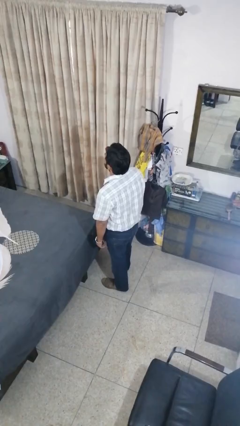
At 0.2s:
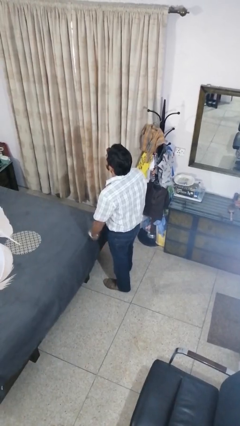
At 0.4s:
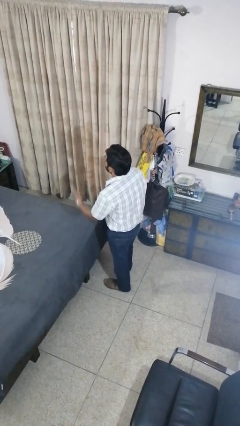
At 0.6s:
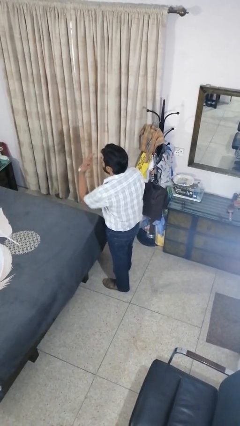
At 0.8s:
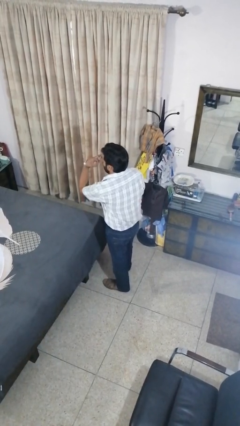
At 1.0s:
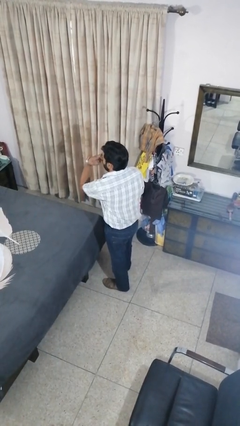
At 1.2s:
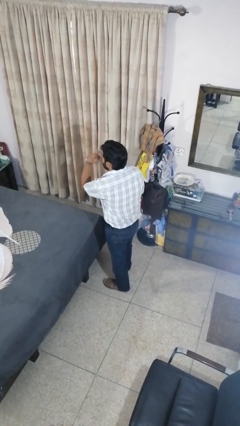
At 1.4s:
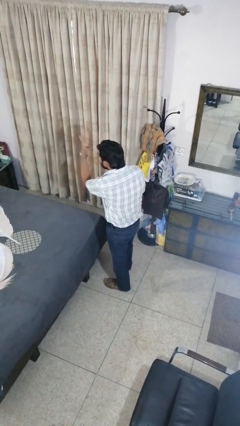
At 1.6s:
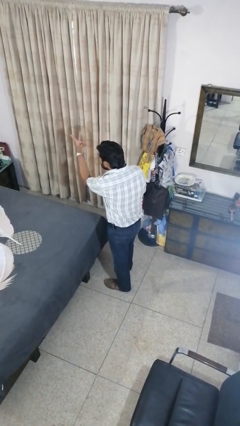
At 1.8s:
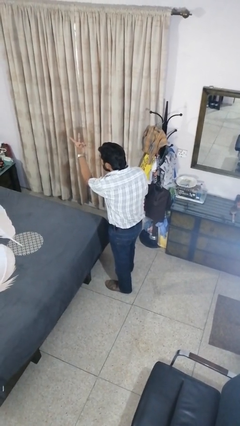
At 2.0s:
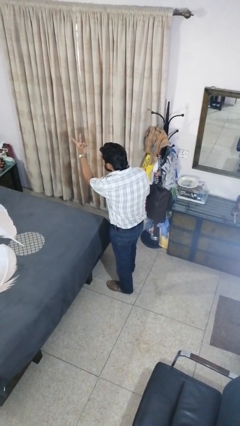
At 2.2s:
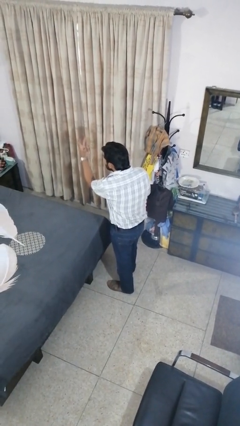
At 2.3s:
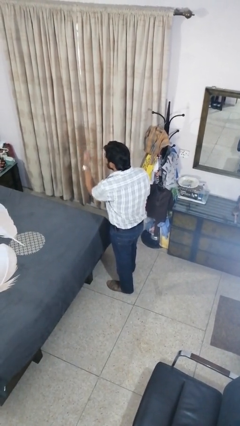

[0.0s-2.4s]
person gestures watch closely

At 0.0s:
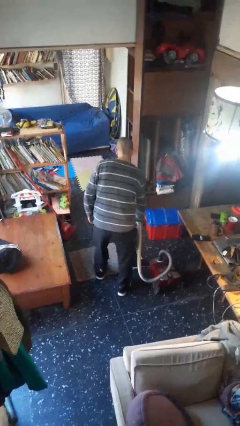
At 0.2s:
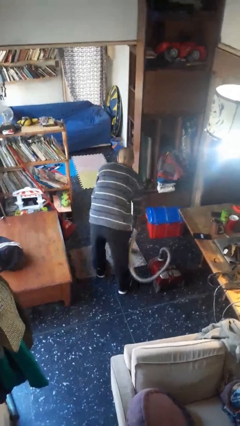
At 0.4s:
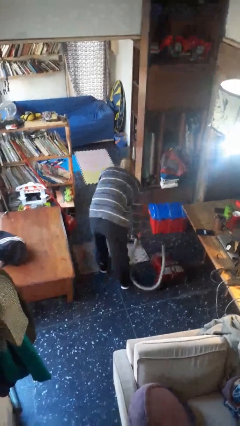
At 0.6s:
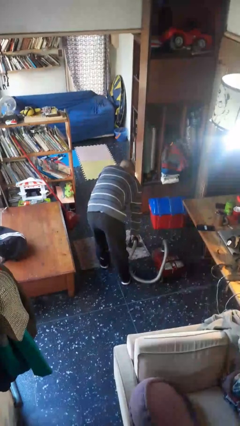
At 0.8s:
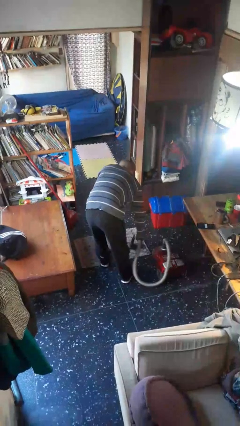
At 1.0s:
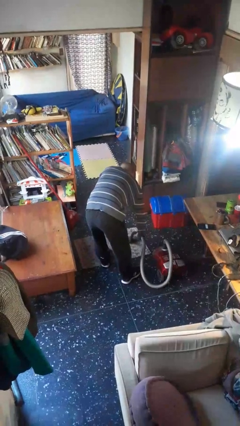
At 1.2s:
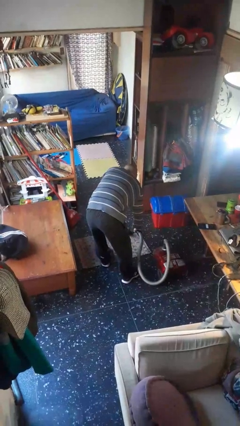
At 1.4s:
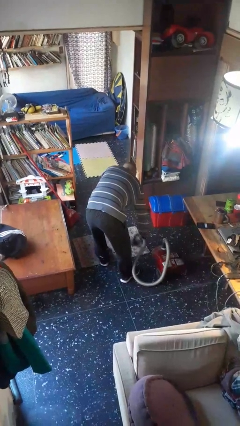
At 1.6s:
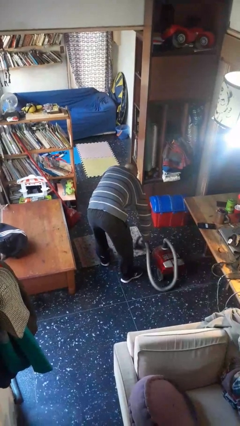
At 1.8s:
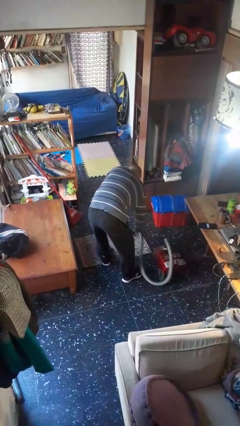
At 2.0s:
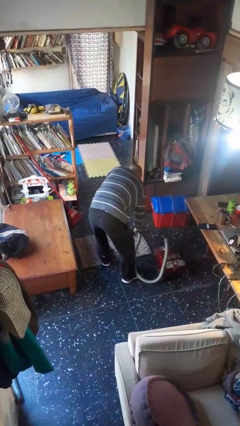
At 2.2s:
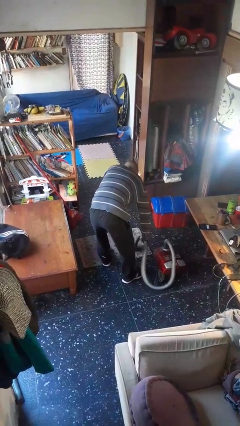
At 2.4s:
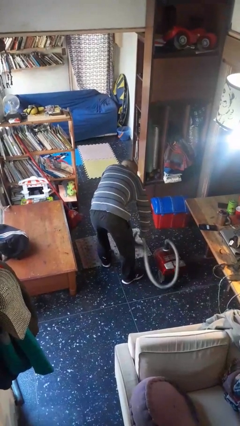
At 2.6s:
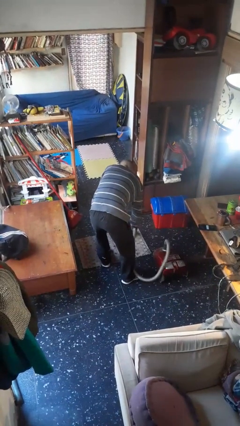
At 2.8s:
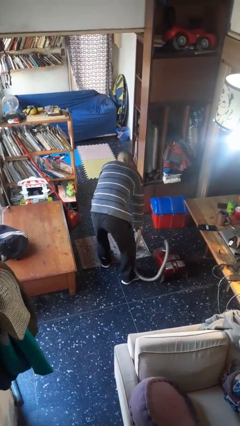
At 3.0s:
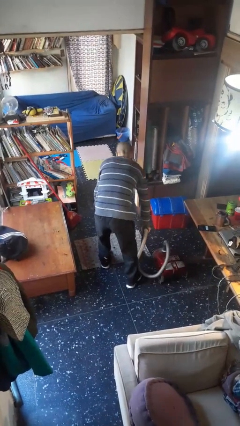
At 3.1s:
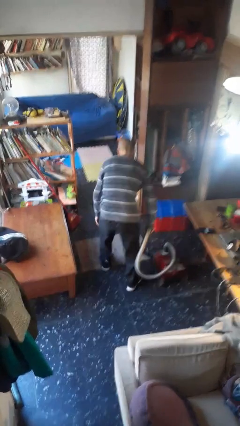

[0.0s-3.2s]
person vacuums carpet

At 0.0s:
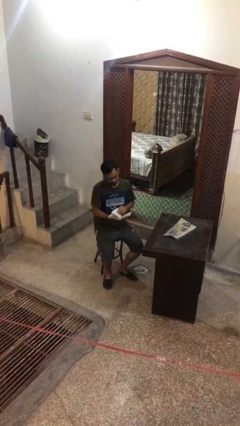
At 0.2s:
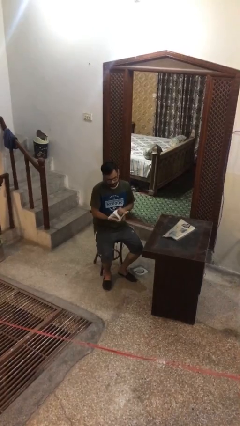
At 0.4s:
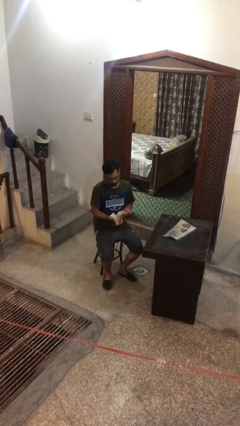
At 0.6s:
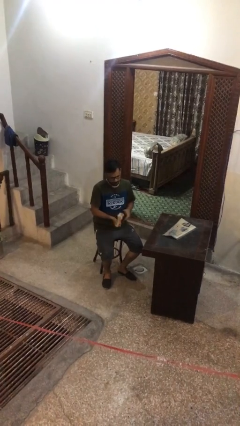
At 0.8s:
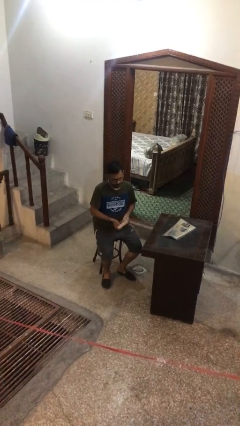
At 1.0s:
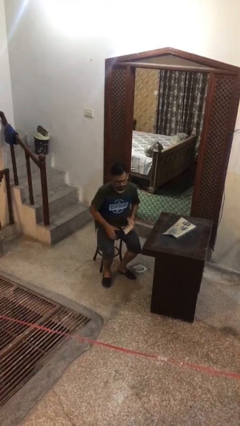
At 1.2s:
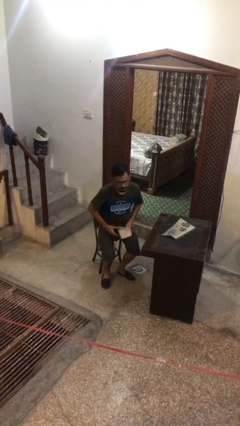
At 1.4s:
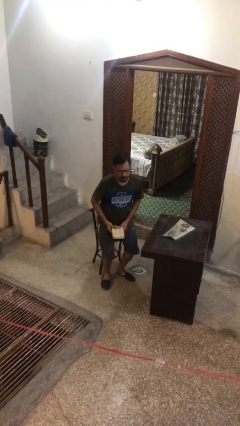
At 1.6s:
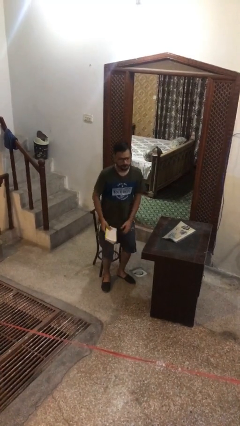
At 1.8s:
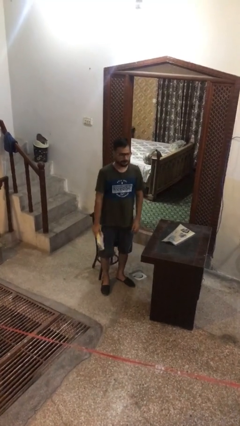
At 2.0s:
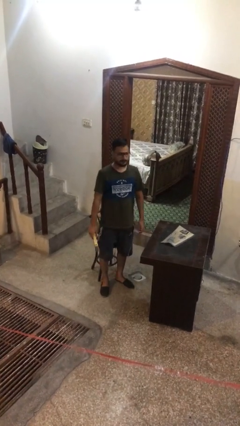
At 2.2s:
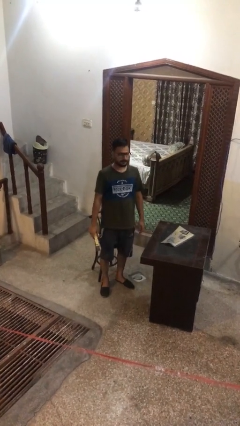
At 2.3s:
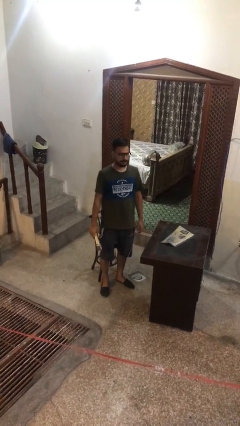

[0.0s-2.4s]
person stands up

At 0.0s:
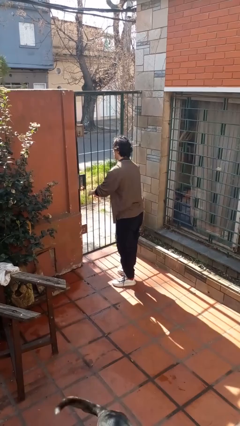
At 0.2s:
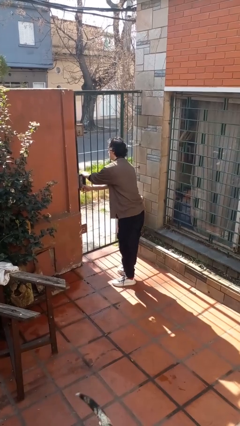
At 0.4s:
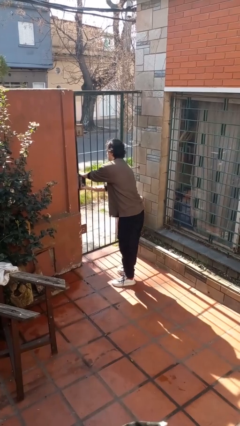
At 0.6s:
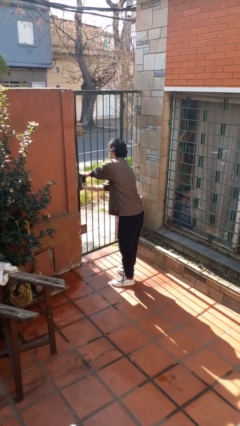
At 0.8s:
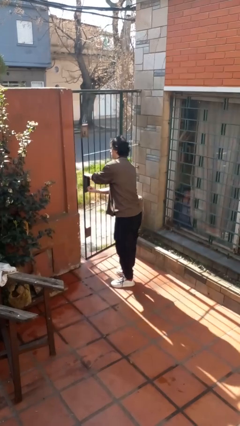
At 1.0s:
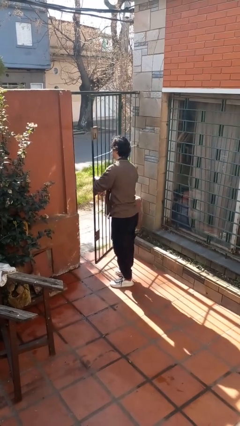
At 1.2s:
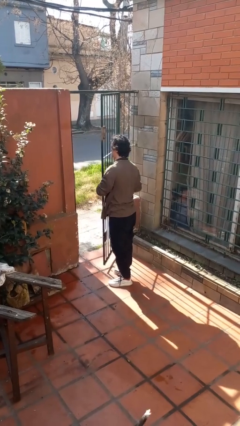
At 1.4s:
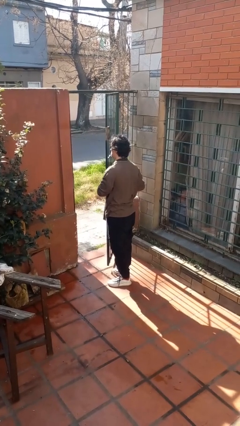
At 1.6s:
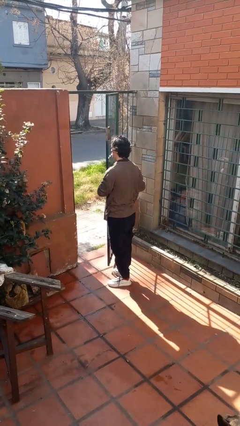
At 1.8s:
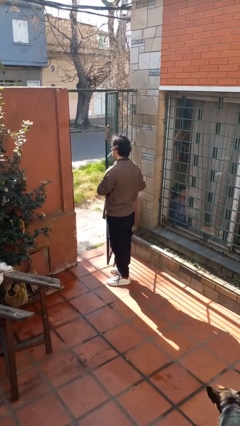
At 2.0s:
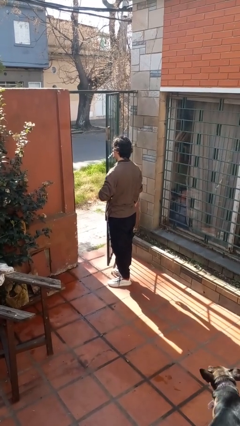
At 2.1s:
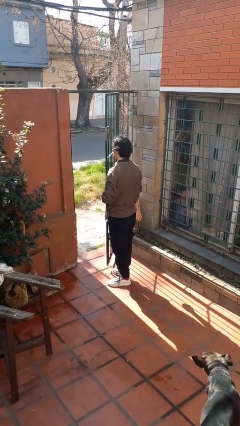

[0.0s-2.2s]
person opens gate

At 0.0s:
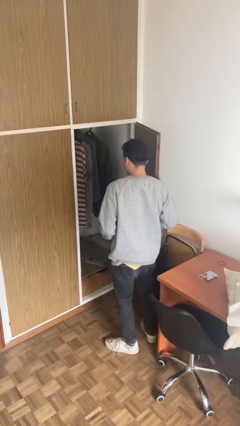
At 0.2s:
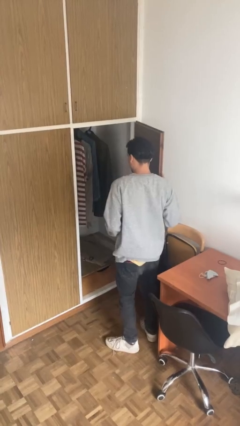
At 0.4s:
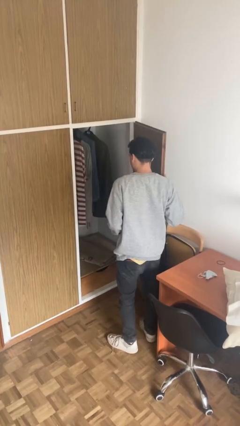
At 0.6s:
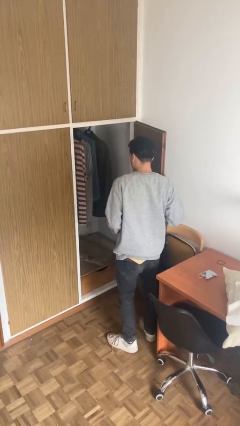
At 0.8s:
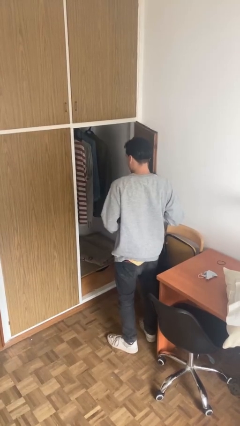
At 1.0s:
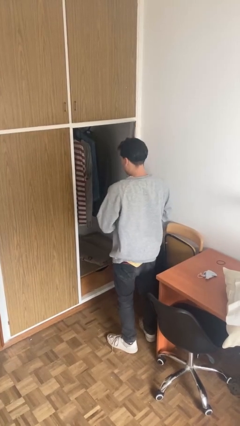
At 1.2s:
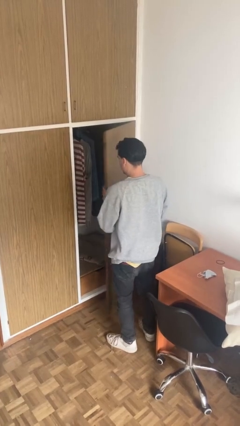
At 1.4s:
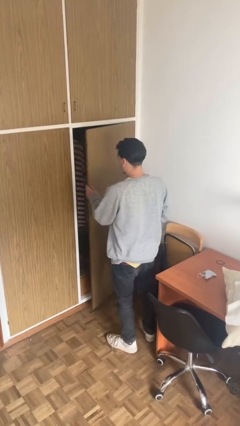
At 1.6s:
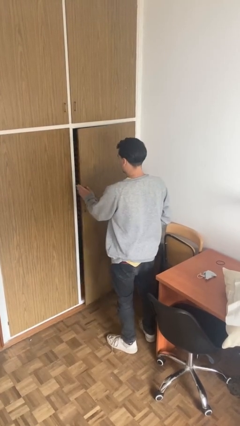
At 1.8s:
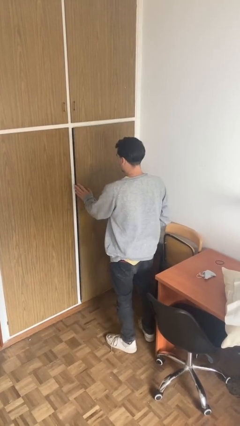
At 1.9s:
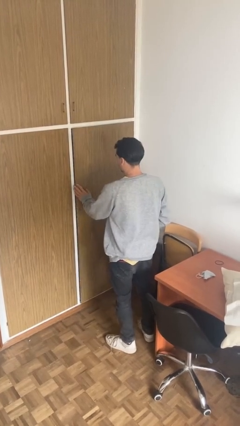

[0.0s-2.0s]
person closes closet door

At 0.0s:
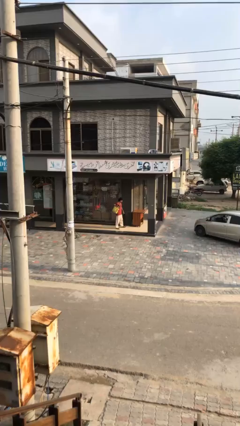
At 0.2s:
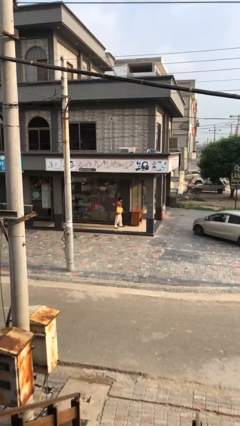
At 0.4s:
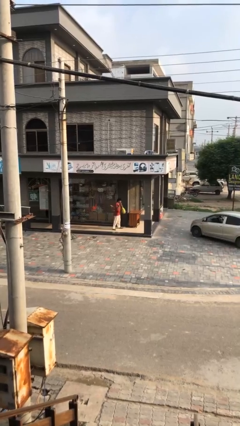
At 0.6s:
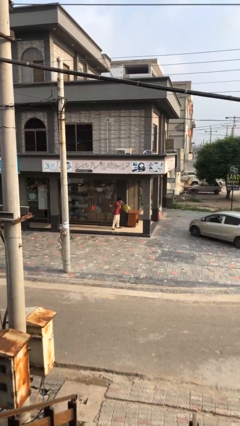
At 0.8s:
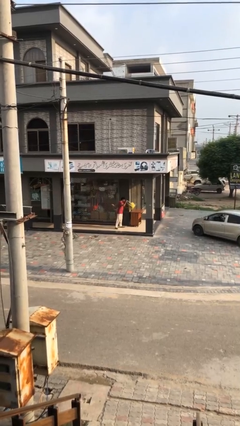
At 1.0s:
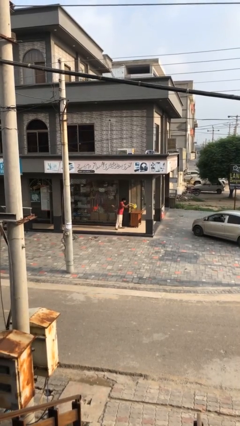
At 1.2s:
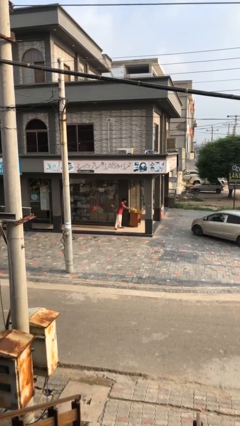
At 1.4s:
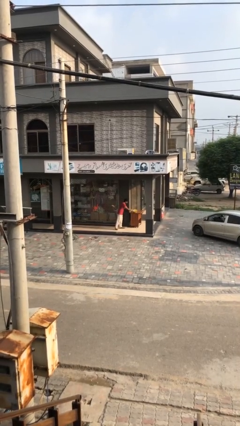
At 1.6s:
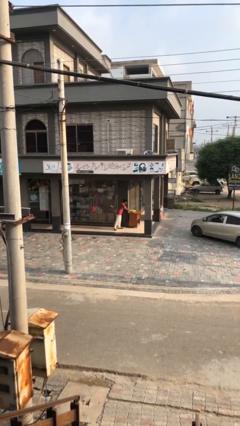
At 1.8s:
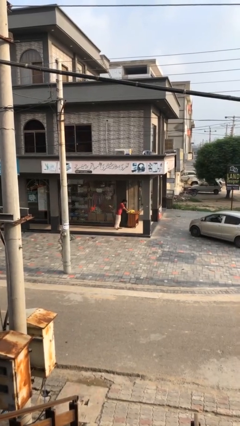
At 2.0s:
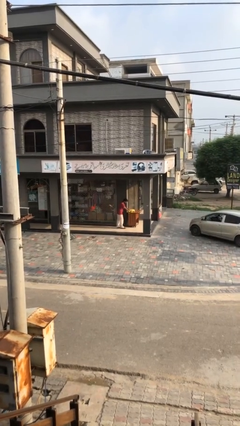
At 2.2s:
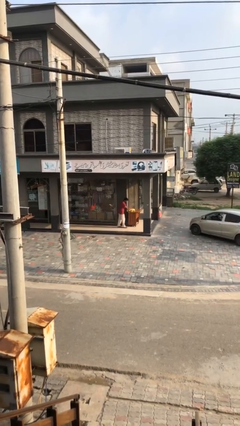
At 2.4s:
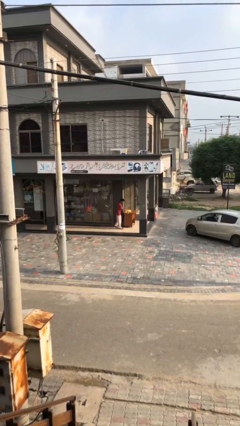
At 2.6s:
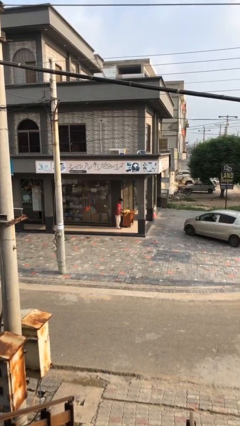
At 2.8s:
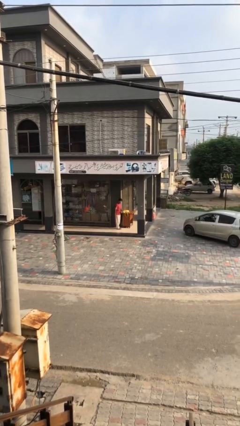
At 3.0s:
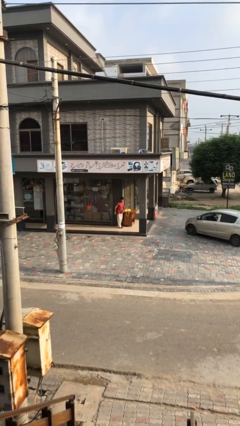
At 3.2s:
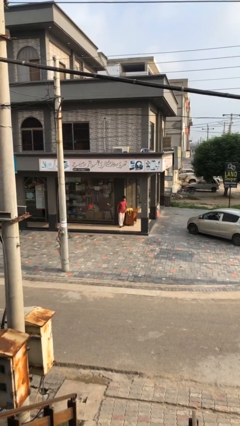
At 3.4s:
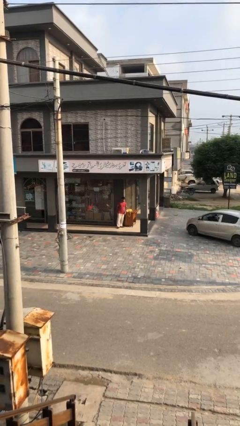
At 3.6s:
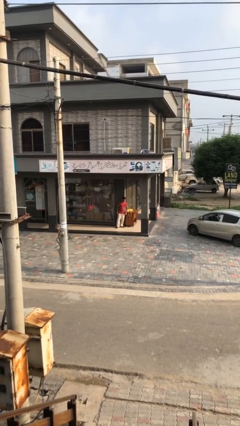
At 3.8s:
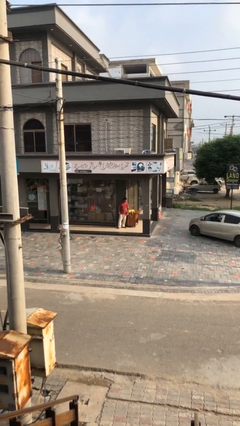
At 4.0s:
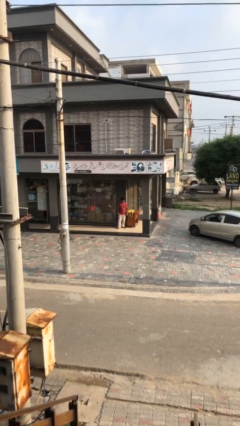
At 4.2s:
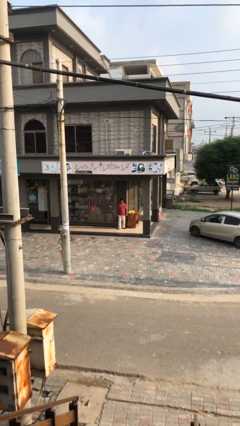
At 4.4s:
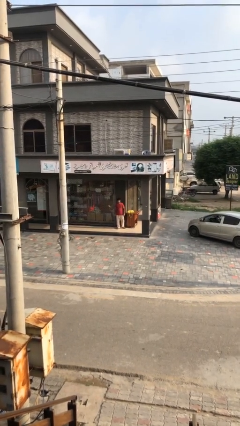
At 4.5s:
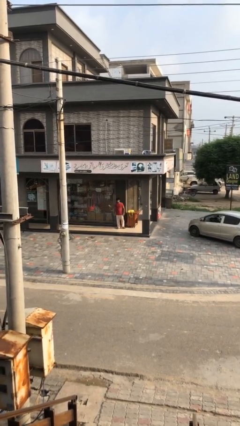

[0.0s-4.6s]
person puts down object on table

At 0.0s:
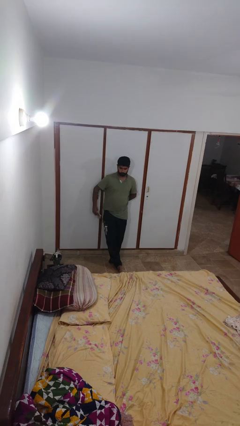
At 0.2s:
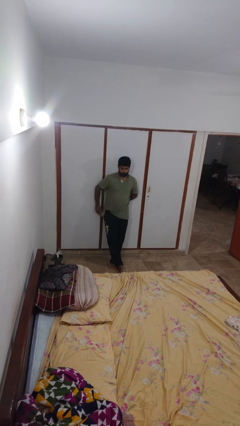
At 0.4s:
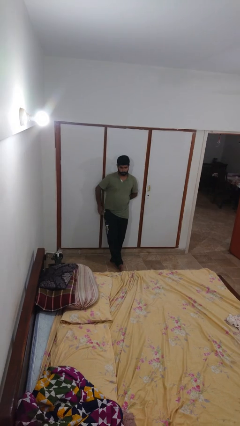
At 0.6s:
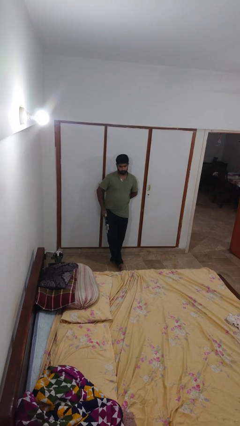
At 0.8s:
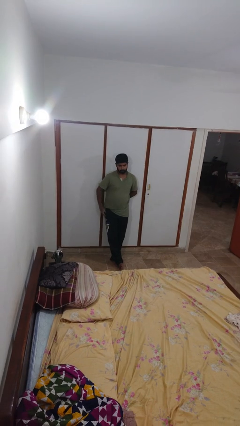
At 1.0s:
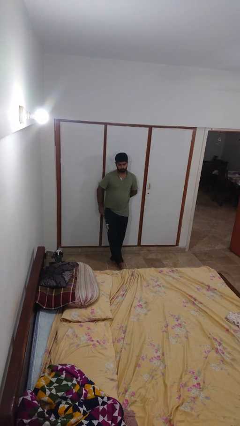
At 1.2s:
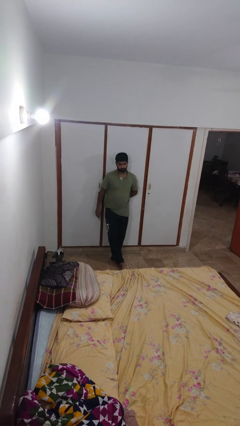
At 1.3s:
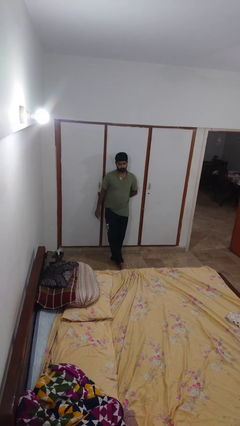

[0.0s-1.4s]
person puts phone into pocket
